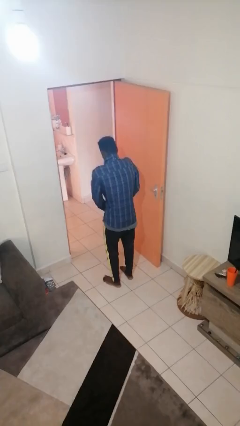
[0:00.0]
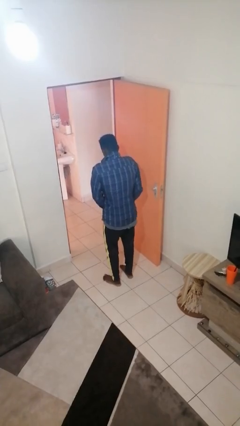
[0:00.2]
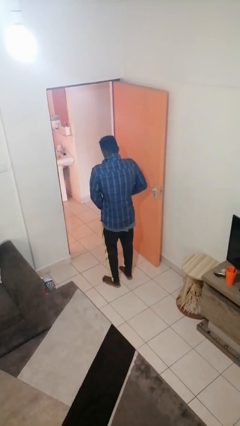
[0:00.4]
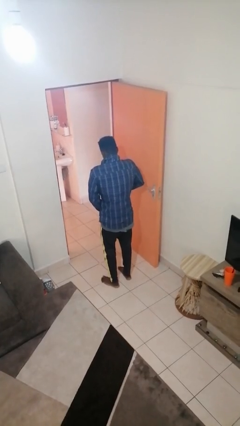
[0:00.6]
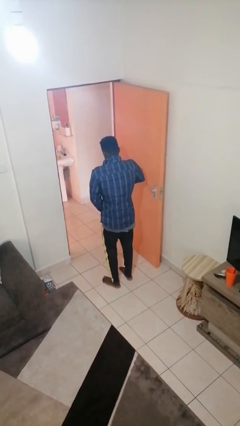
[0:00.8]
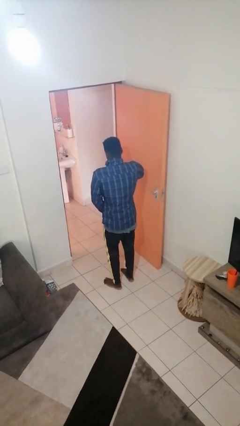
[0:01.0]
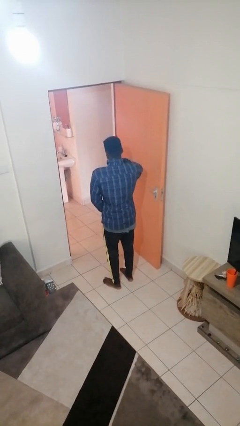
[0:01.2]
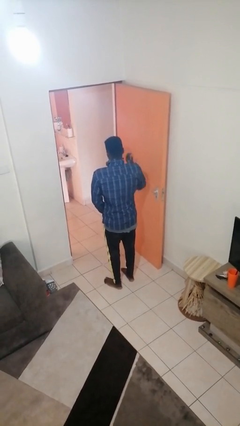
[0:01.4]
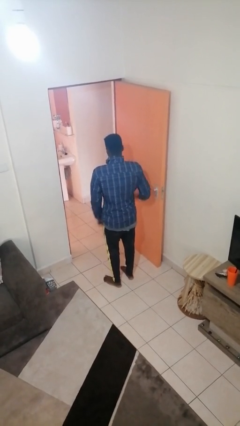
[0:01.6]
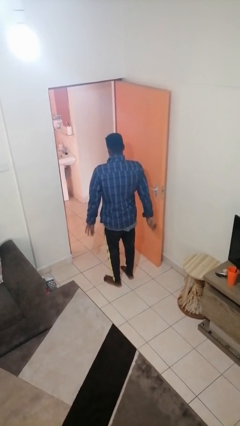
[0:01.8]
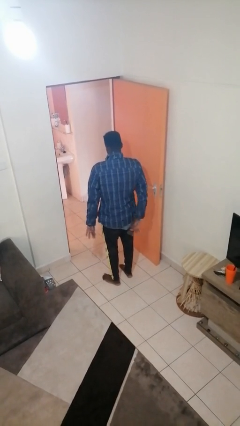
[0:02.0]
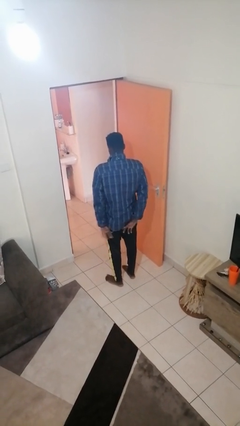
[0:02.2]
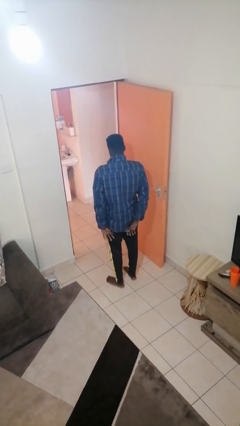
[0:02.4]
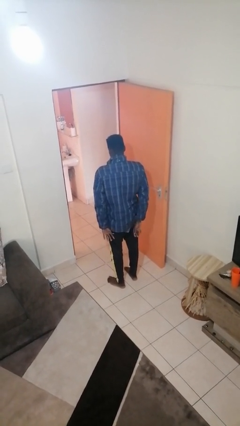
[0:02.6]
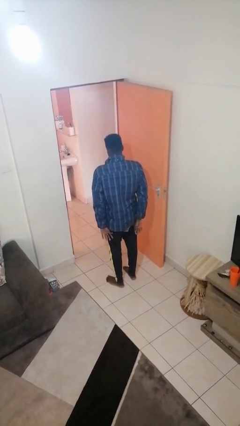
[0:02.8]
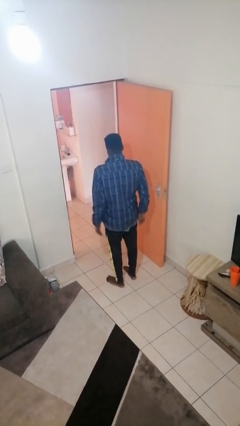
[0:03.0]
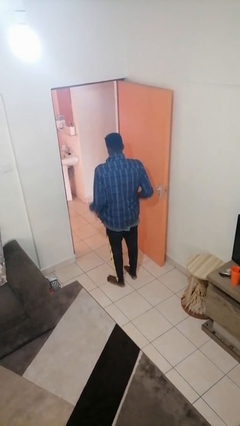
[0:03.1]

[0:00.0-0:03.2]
person zips up jacket

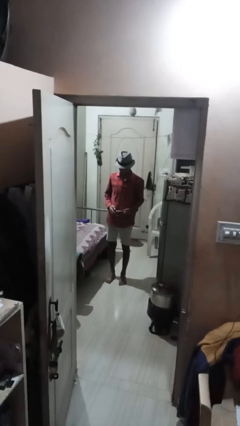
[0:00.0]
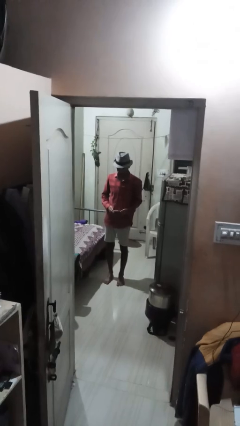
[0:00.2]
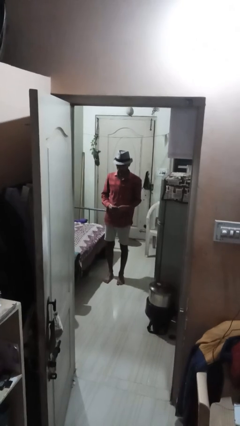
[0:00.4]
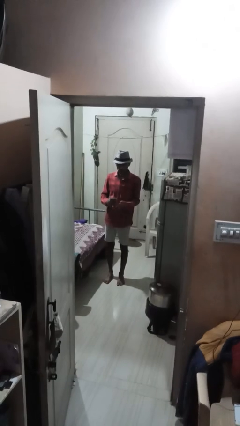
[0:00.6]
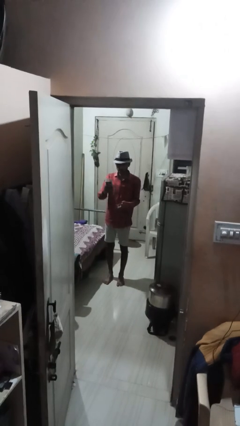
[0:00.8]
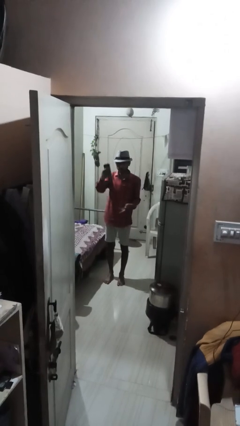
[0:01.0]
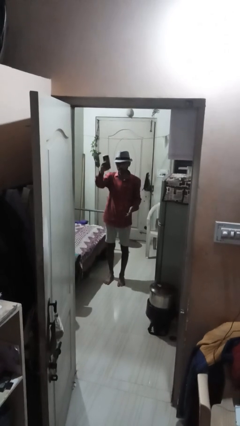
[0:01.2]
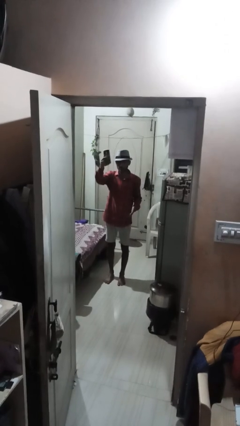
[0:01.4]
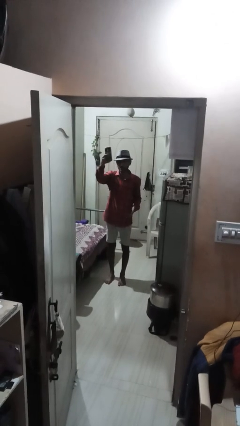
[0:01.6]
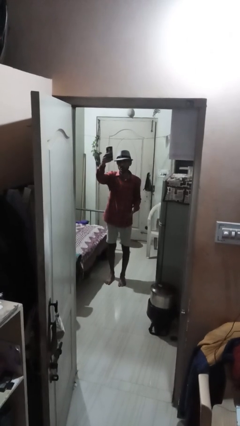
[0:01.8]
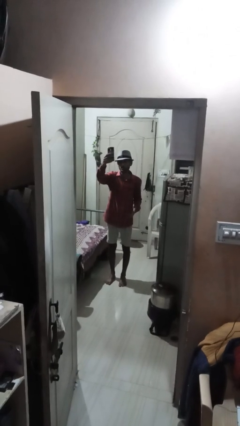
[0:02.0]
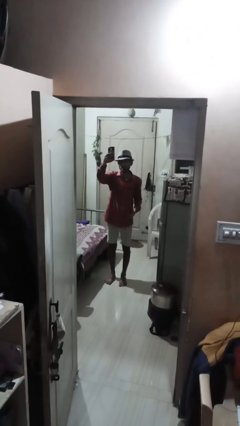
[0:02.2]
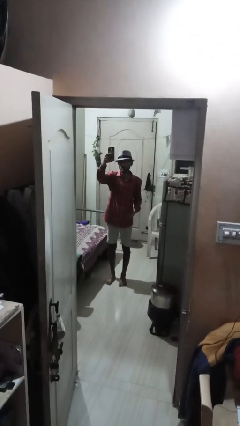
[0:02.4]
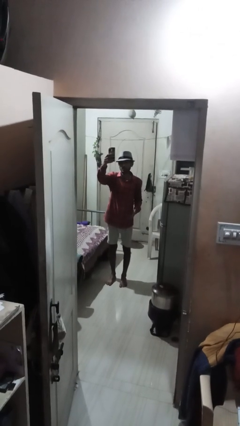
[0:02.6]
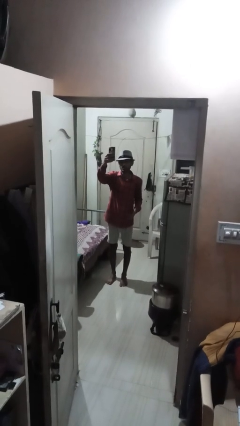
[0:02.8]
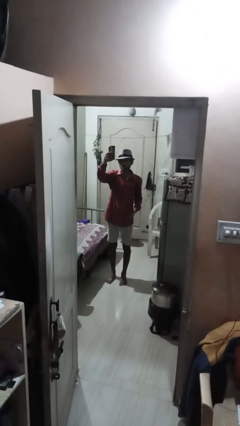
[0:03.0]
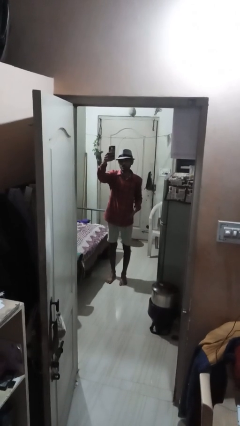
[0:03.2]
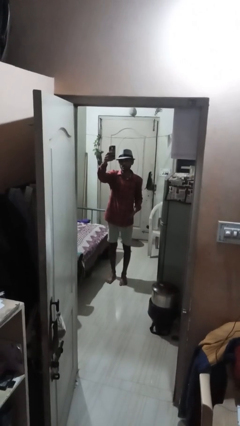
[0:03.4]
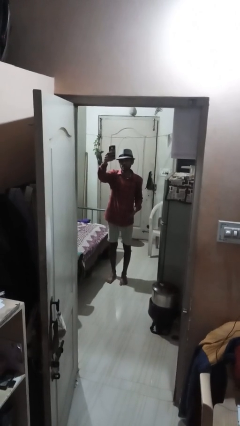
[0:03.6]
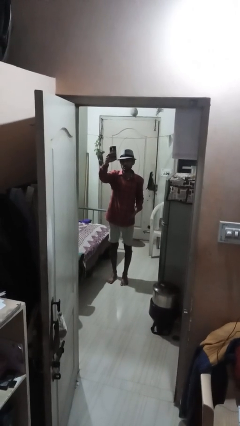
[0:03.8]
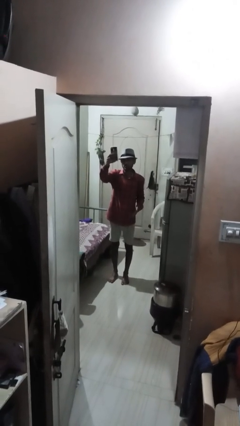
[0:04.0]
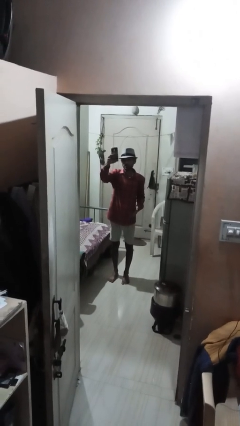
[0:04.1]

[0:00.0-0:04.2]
person takes selfie

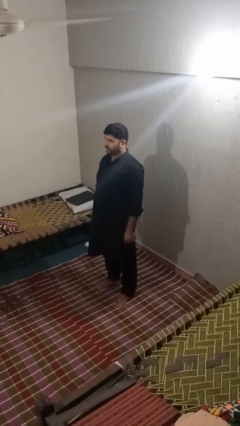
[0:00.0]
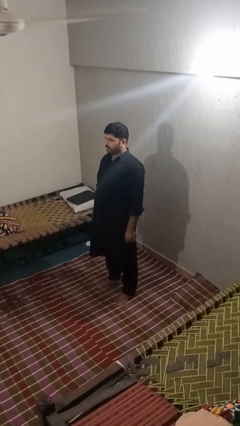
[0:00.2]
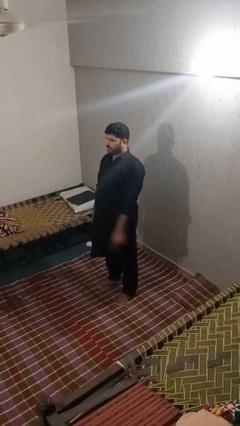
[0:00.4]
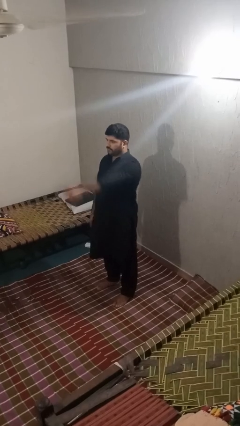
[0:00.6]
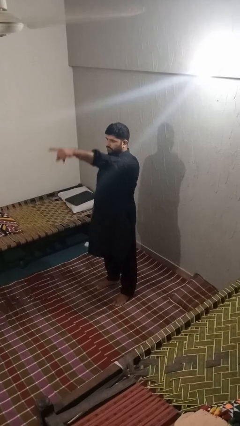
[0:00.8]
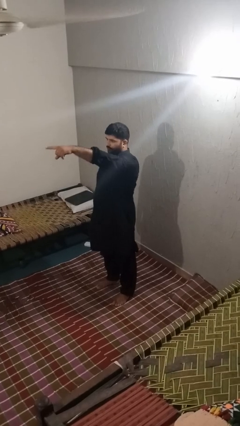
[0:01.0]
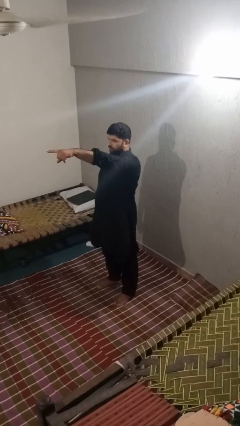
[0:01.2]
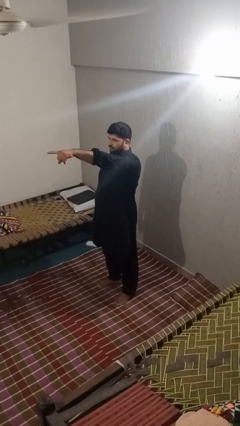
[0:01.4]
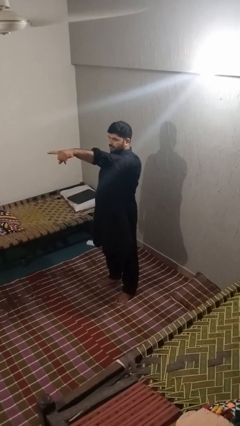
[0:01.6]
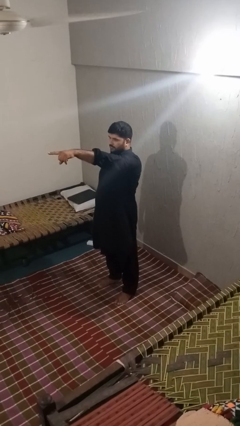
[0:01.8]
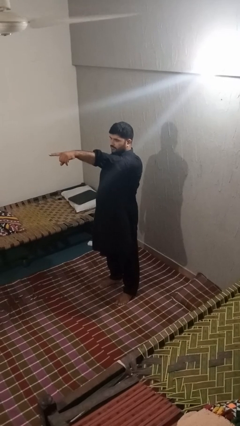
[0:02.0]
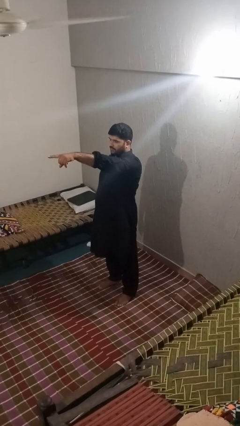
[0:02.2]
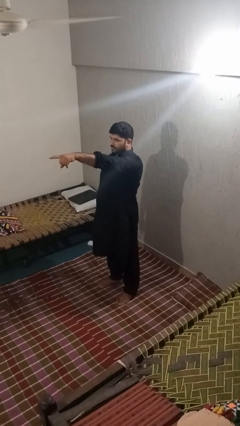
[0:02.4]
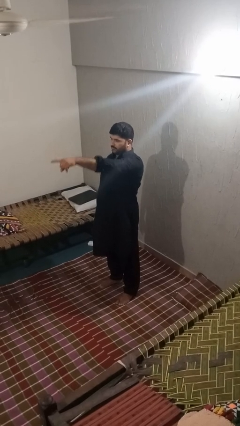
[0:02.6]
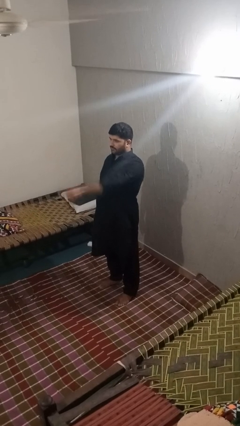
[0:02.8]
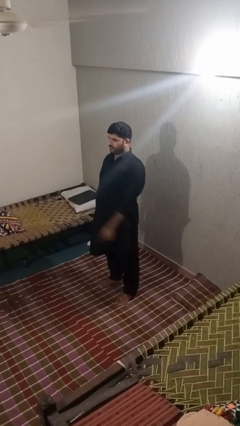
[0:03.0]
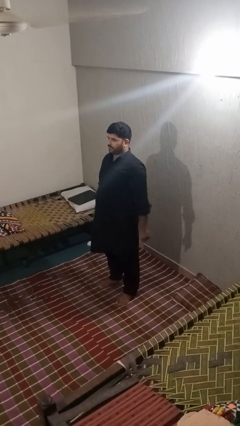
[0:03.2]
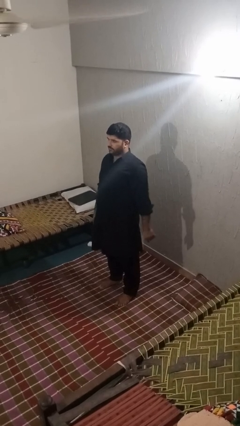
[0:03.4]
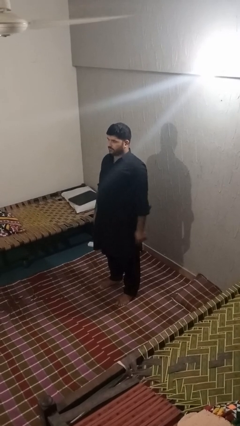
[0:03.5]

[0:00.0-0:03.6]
person points at person

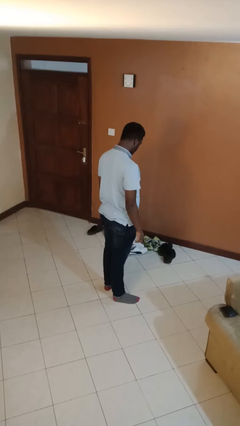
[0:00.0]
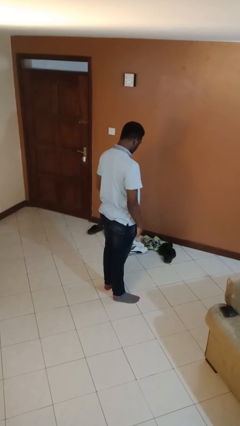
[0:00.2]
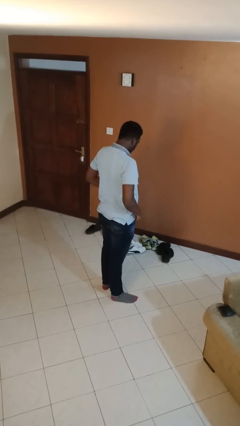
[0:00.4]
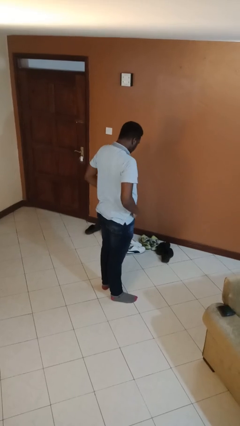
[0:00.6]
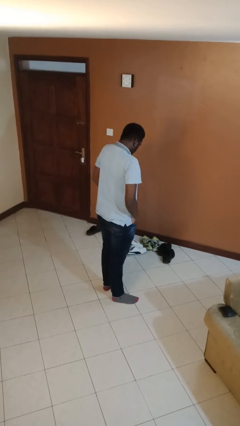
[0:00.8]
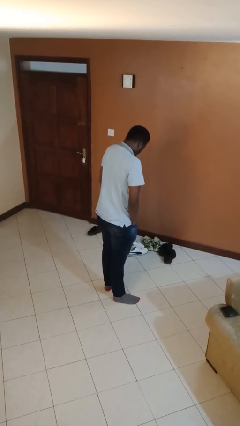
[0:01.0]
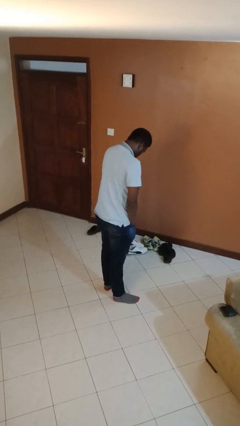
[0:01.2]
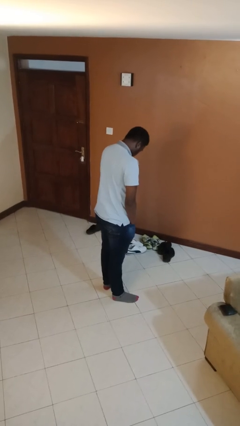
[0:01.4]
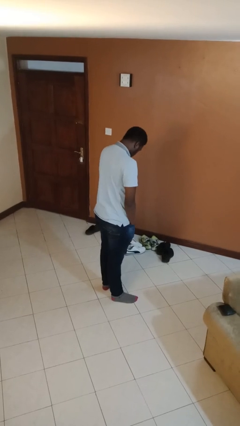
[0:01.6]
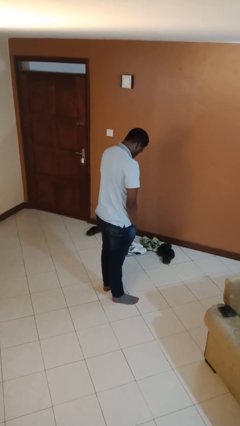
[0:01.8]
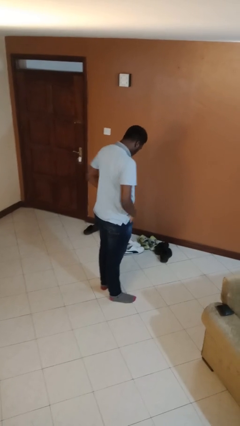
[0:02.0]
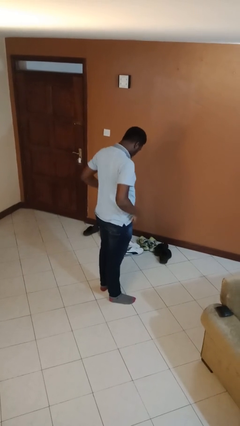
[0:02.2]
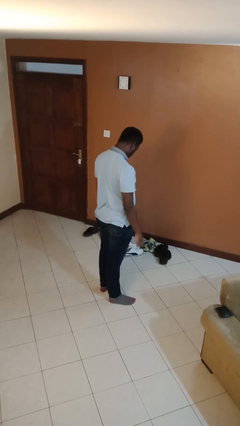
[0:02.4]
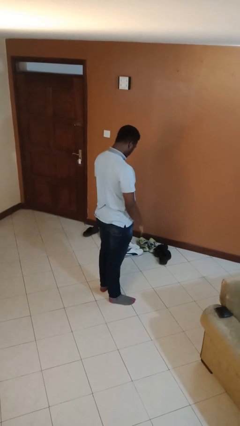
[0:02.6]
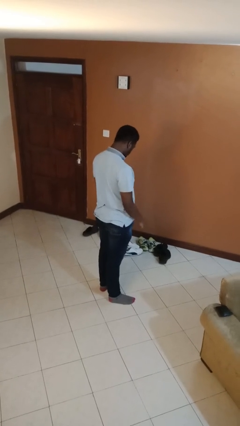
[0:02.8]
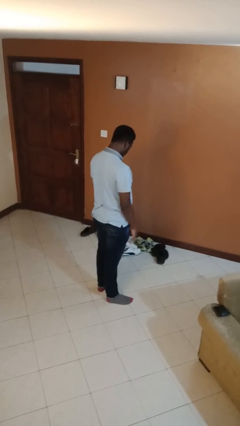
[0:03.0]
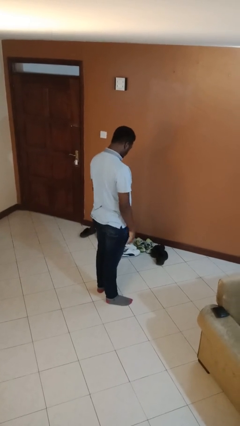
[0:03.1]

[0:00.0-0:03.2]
person puts hands in back pockets

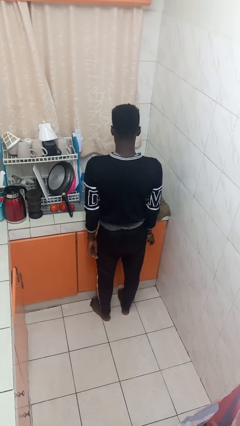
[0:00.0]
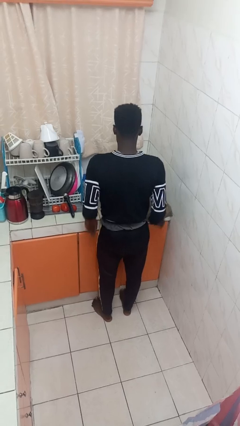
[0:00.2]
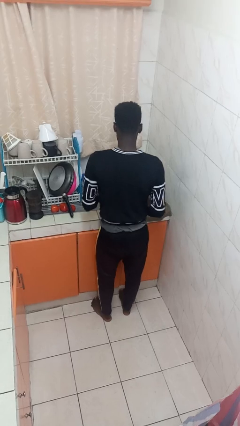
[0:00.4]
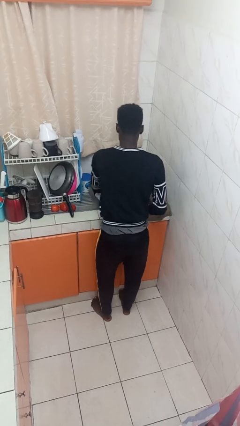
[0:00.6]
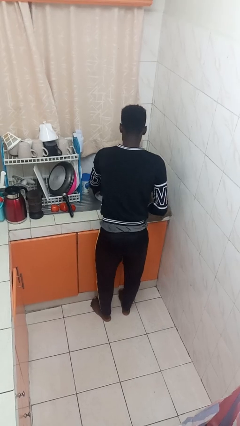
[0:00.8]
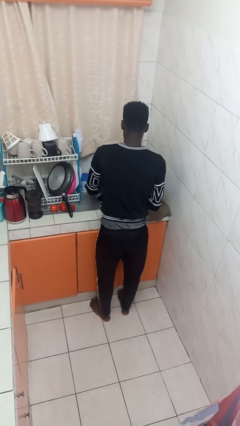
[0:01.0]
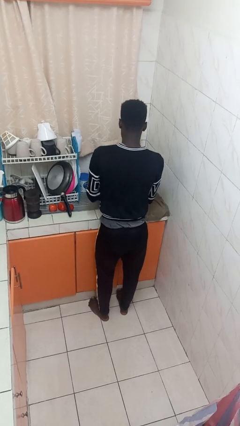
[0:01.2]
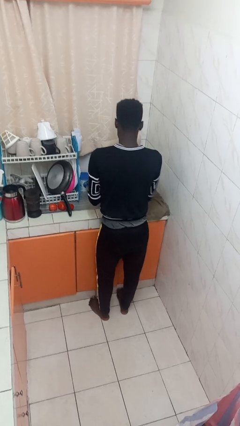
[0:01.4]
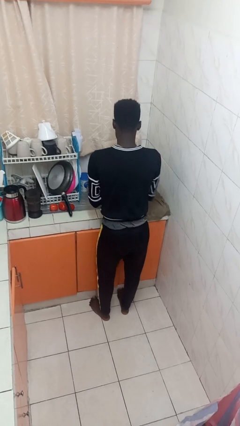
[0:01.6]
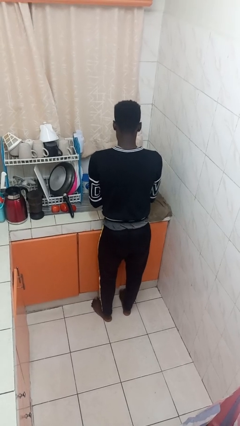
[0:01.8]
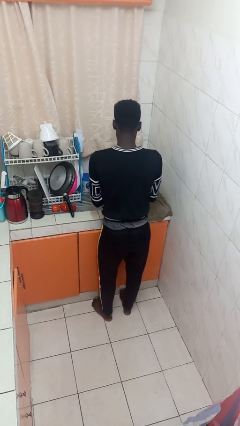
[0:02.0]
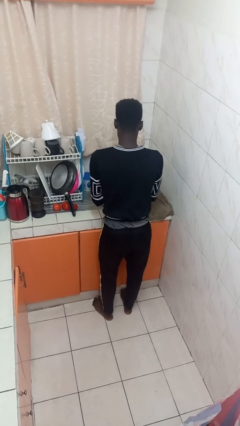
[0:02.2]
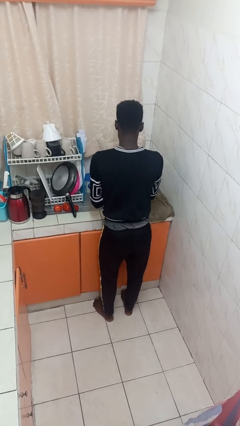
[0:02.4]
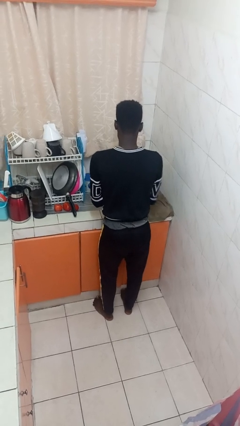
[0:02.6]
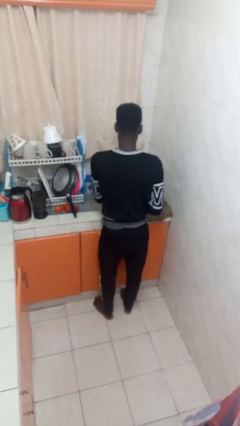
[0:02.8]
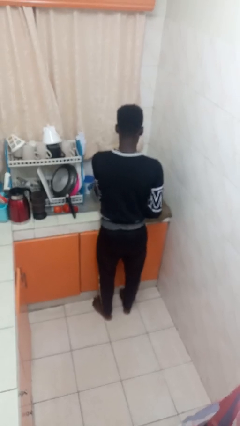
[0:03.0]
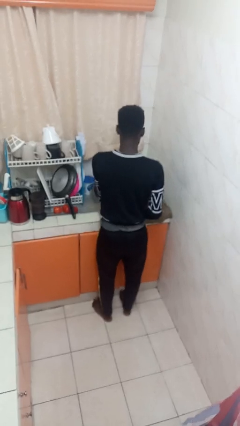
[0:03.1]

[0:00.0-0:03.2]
person washes dish

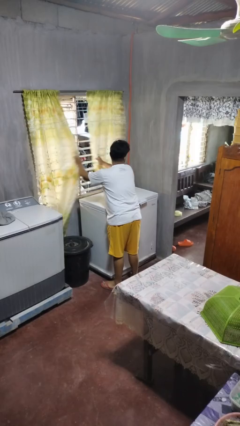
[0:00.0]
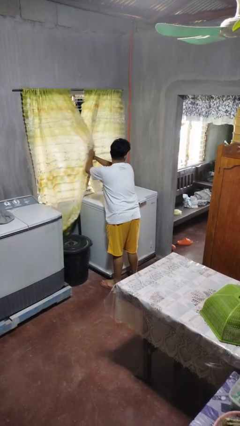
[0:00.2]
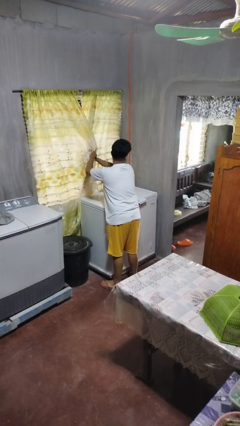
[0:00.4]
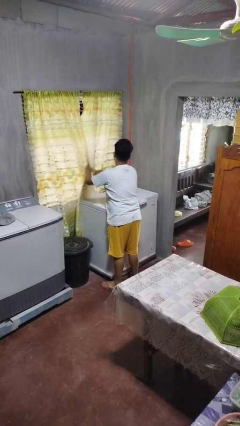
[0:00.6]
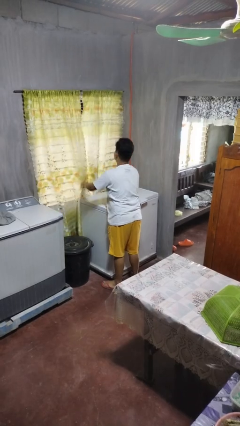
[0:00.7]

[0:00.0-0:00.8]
person closes curtains
